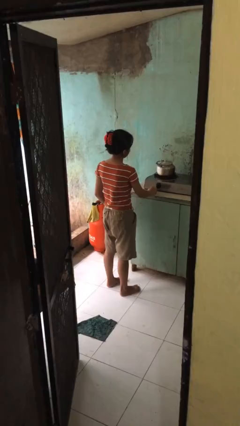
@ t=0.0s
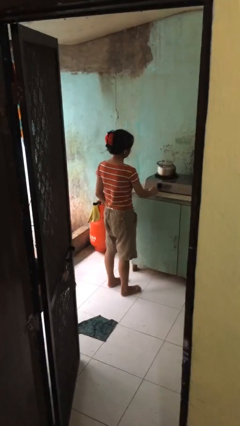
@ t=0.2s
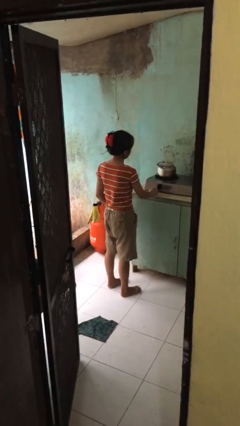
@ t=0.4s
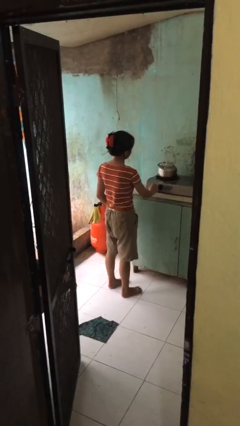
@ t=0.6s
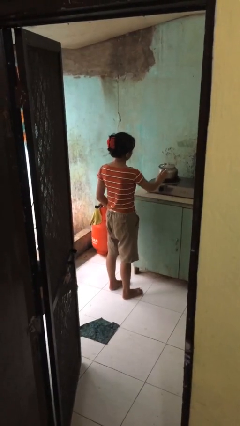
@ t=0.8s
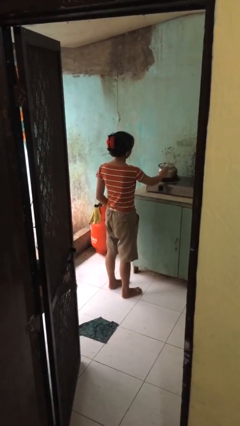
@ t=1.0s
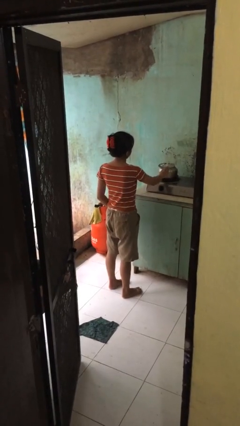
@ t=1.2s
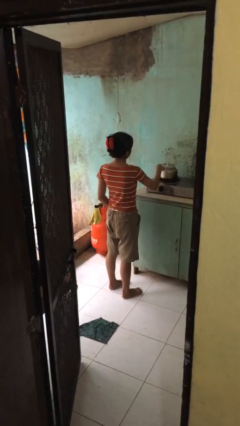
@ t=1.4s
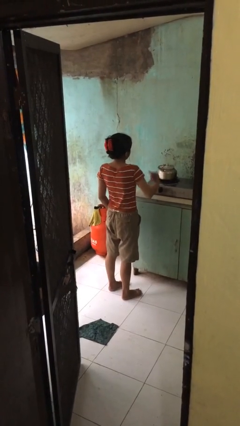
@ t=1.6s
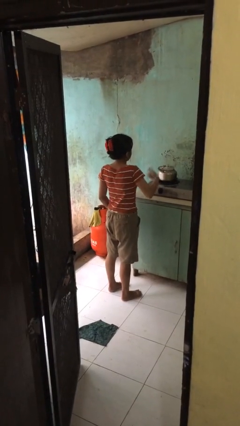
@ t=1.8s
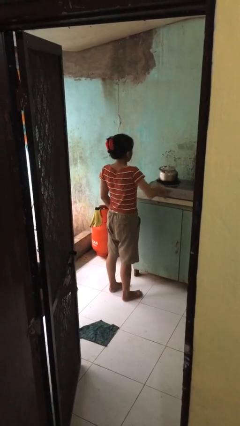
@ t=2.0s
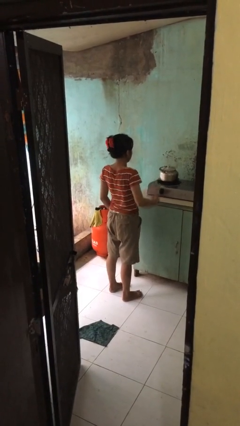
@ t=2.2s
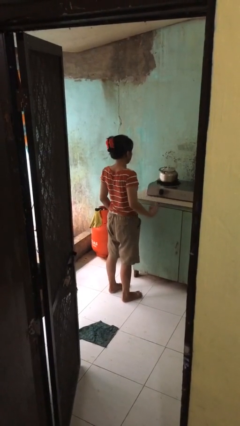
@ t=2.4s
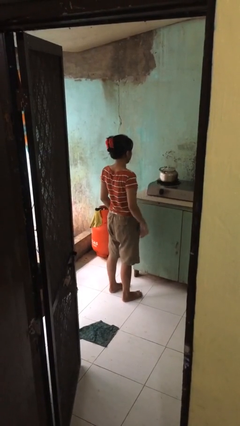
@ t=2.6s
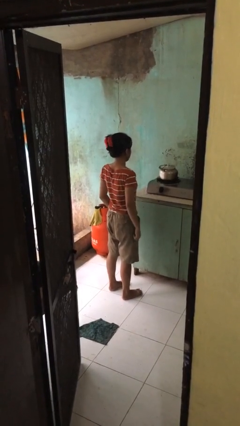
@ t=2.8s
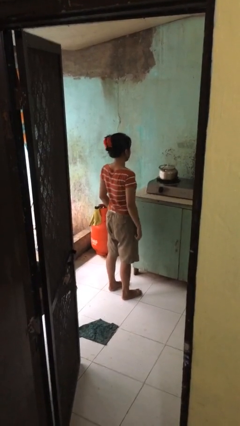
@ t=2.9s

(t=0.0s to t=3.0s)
person burns hand

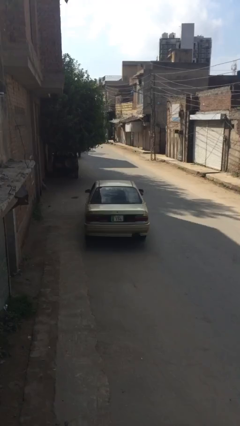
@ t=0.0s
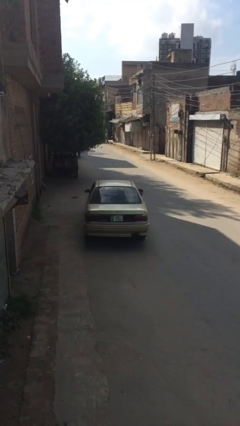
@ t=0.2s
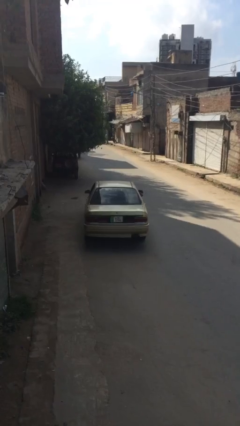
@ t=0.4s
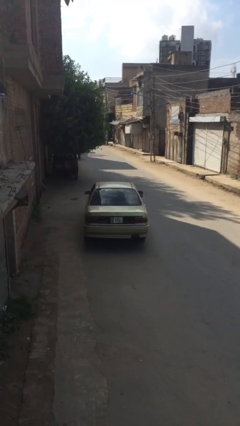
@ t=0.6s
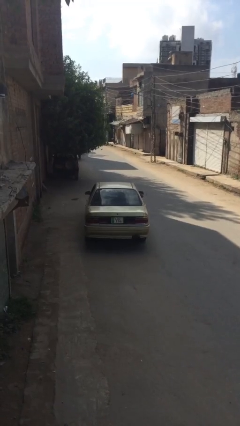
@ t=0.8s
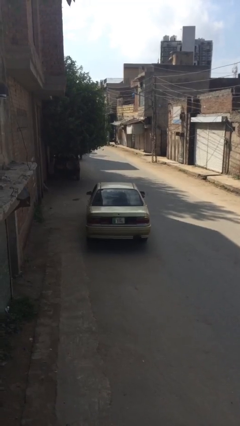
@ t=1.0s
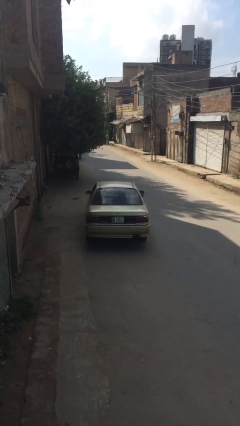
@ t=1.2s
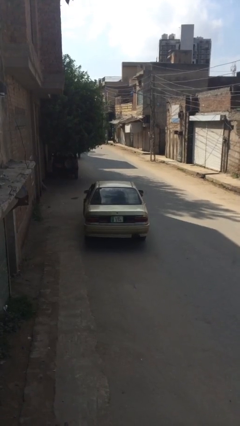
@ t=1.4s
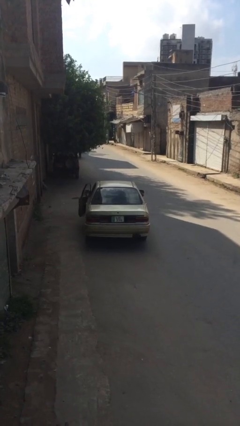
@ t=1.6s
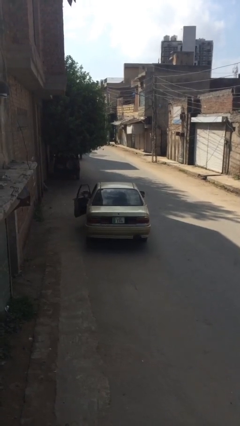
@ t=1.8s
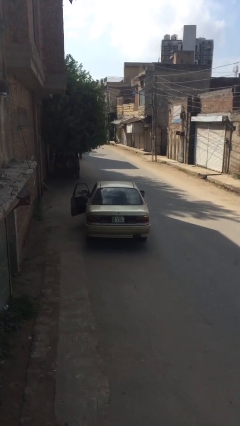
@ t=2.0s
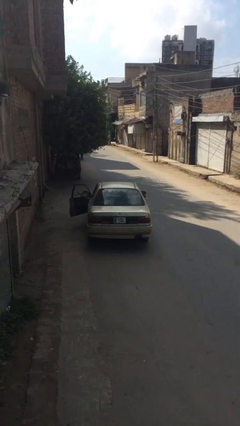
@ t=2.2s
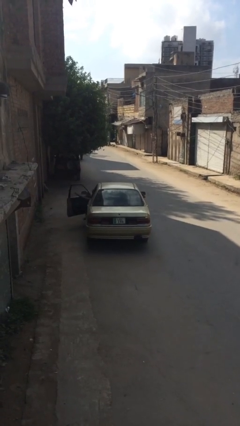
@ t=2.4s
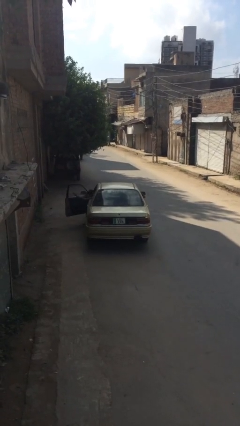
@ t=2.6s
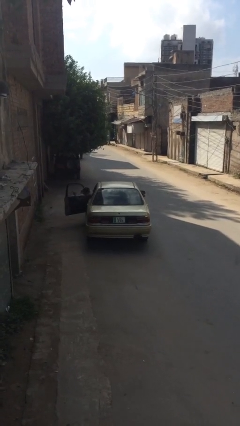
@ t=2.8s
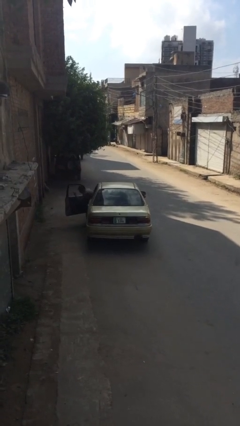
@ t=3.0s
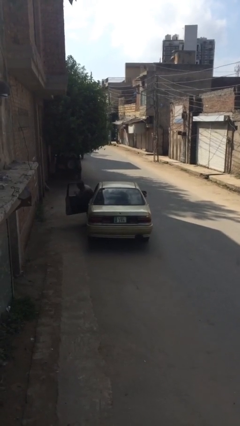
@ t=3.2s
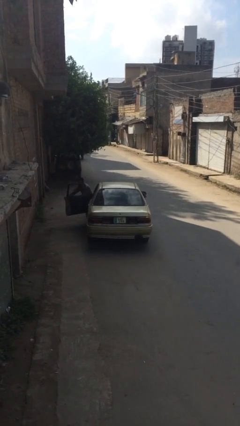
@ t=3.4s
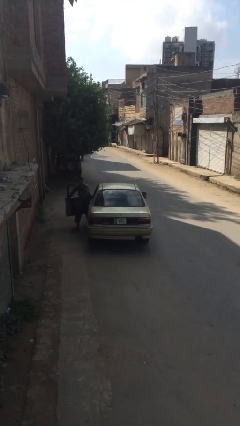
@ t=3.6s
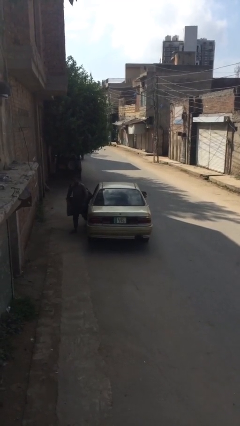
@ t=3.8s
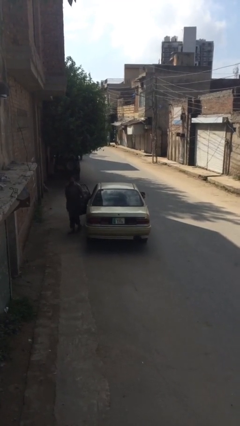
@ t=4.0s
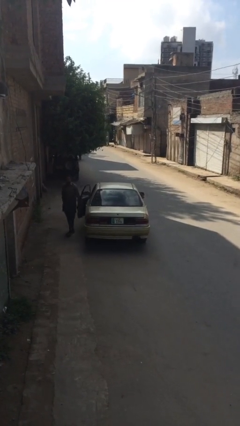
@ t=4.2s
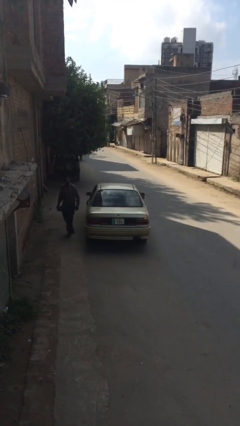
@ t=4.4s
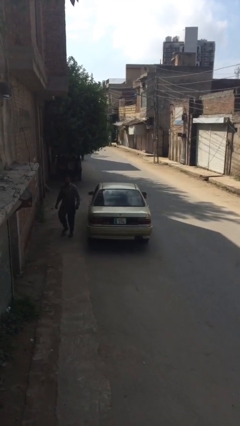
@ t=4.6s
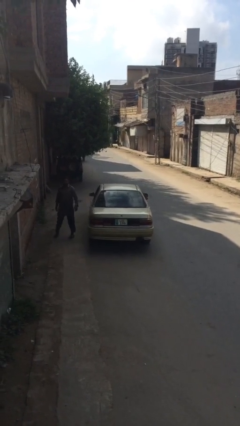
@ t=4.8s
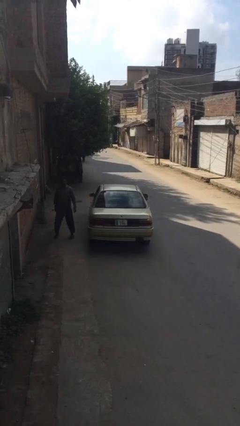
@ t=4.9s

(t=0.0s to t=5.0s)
car drops off person

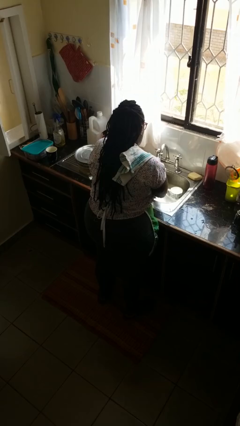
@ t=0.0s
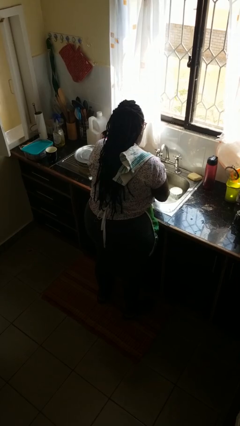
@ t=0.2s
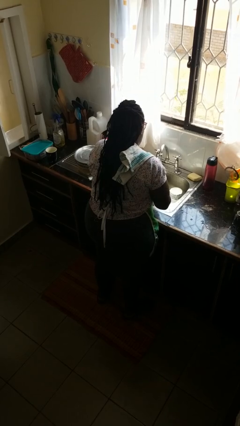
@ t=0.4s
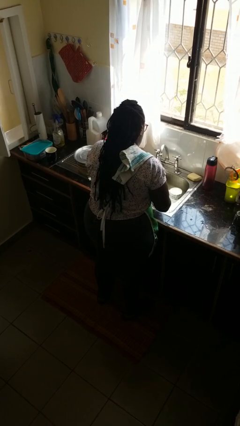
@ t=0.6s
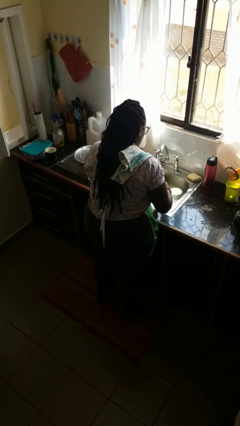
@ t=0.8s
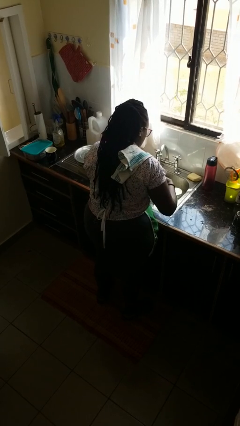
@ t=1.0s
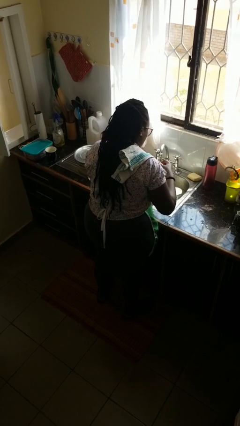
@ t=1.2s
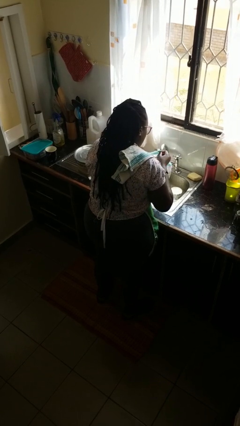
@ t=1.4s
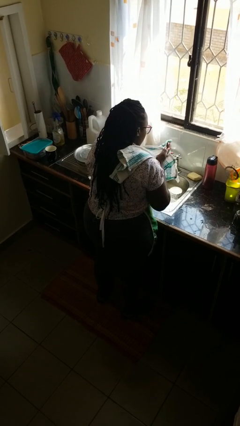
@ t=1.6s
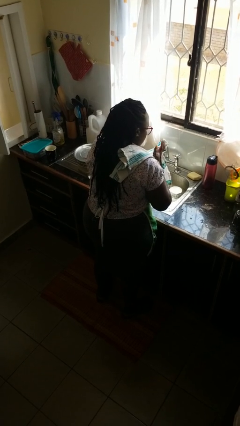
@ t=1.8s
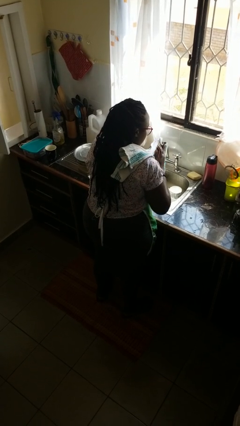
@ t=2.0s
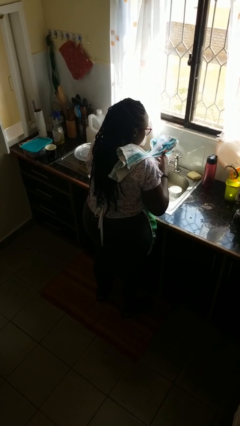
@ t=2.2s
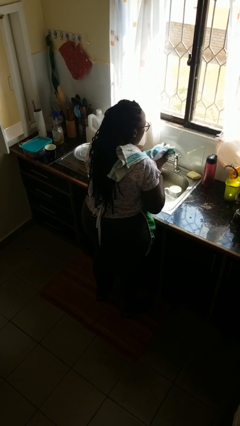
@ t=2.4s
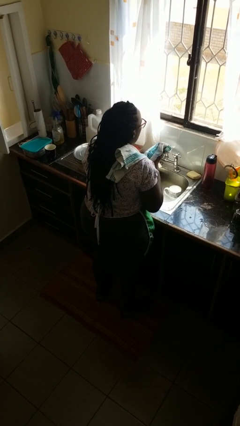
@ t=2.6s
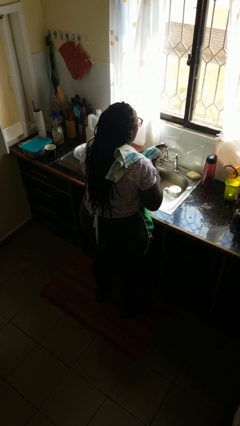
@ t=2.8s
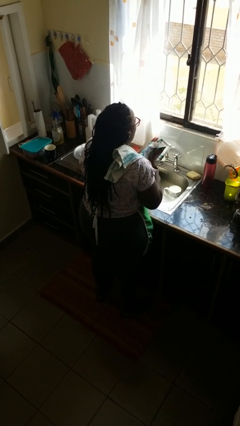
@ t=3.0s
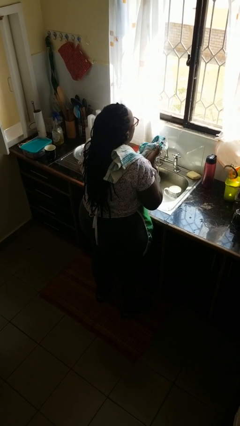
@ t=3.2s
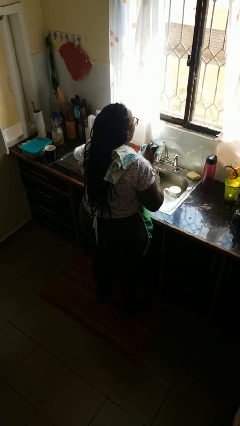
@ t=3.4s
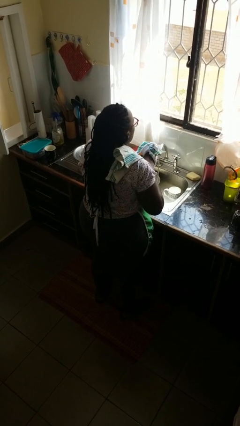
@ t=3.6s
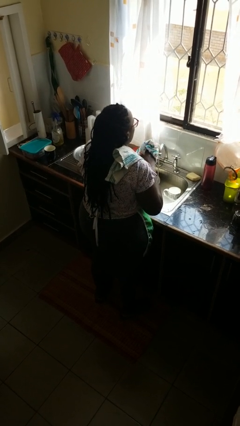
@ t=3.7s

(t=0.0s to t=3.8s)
person dries hands with towel

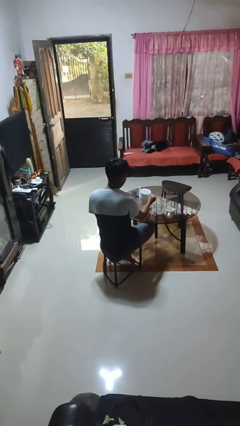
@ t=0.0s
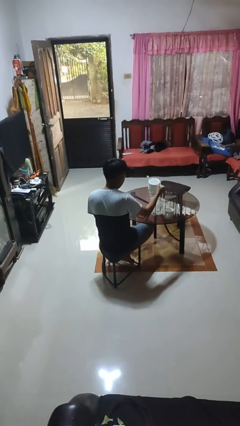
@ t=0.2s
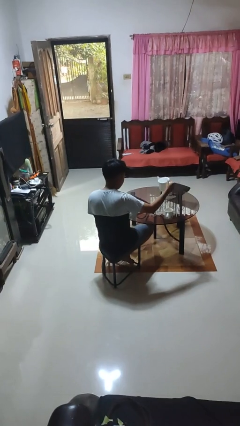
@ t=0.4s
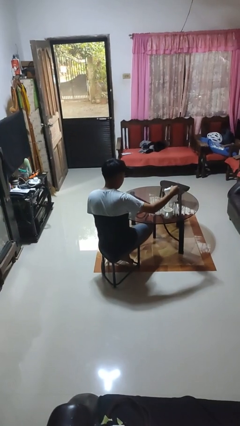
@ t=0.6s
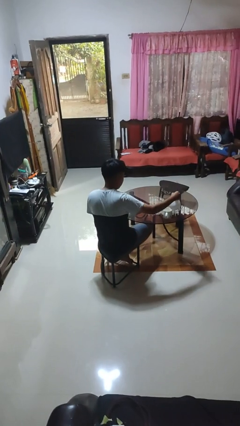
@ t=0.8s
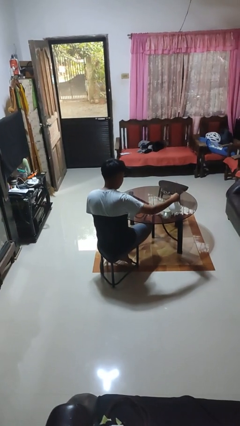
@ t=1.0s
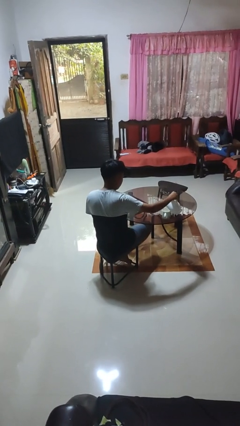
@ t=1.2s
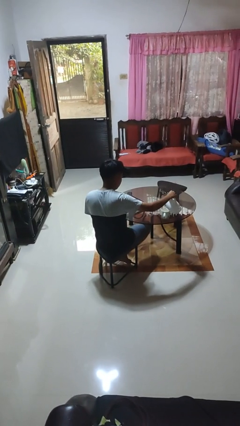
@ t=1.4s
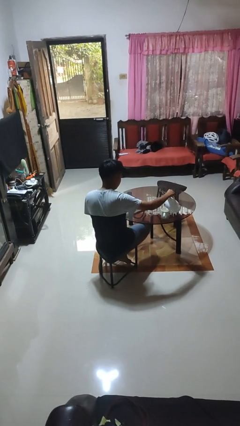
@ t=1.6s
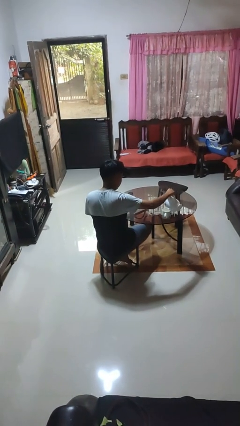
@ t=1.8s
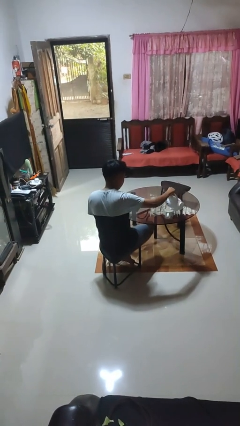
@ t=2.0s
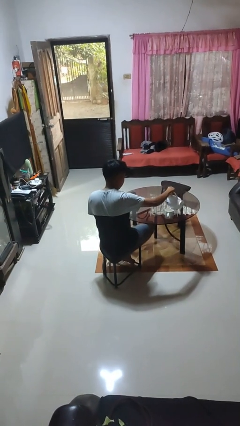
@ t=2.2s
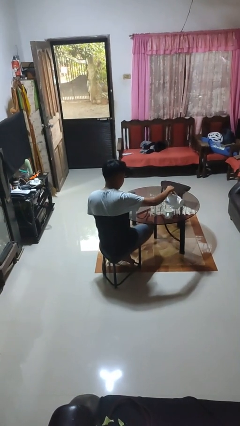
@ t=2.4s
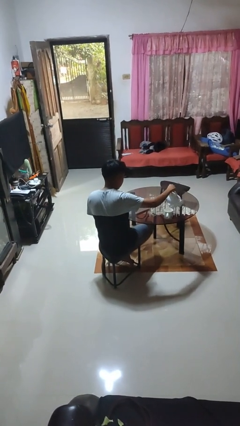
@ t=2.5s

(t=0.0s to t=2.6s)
person pours coffee into mug

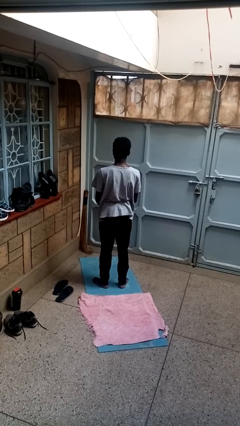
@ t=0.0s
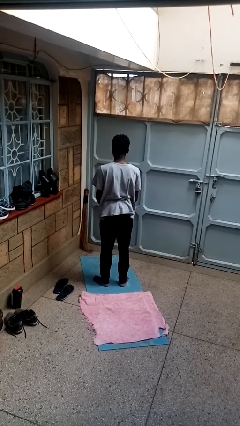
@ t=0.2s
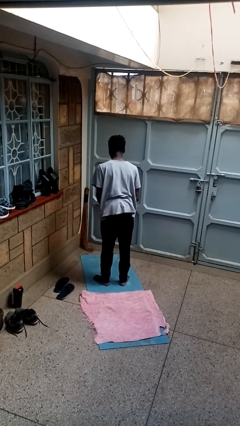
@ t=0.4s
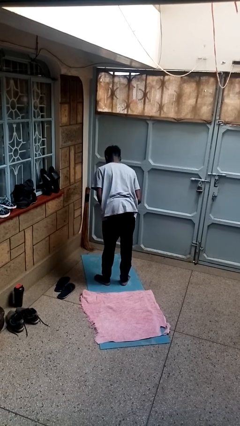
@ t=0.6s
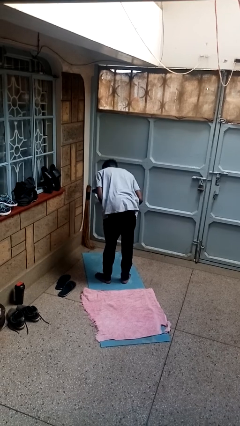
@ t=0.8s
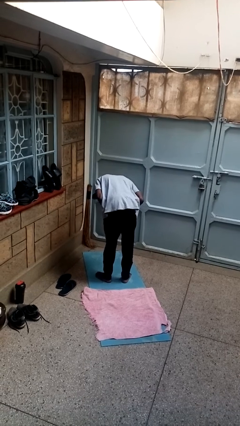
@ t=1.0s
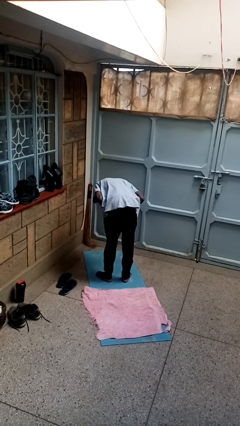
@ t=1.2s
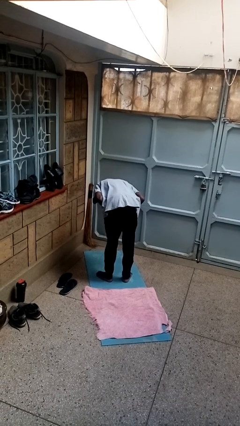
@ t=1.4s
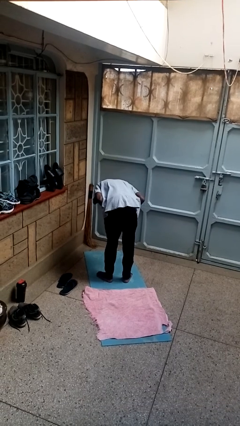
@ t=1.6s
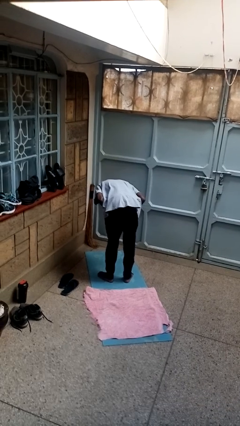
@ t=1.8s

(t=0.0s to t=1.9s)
person bows

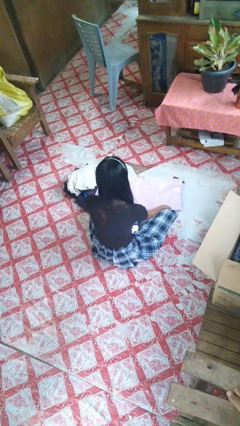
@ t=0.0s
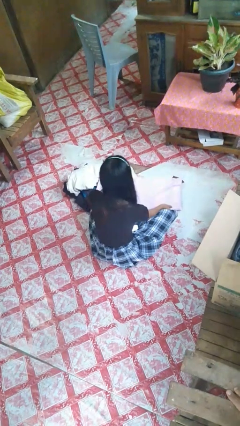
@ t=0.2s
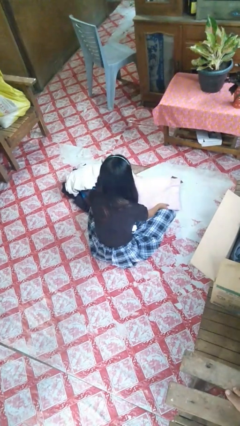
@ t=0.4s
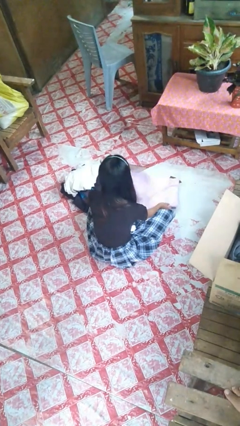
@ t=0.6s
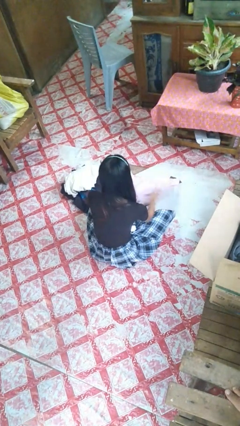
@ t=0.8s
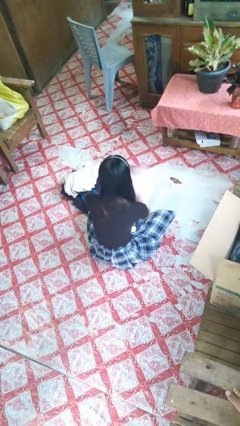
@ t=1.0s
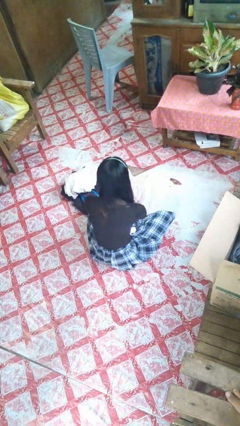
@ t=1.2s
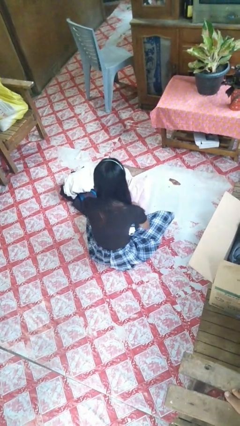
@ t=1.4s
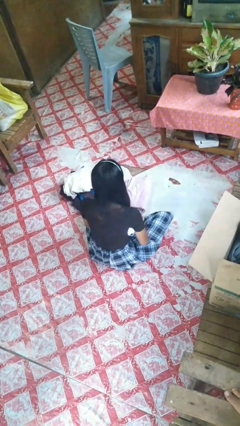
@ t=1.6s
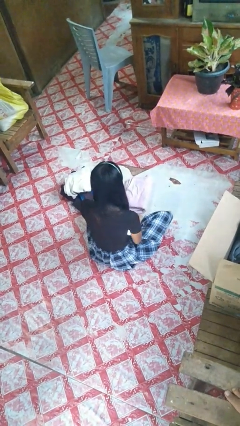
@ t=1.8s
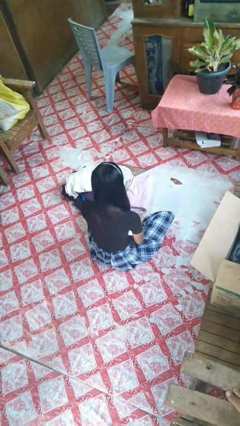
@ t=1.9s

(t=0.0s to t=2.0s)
person folds towel
